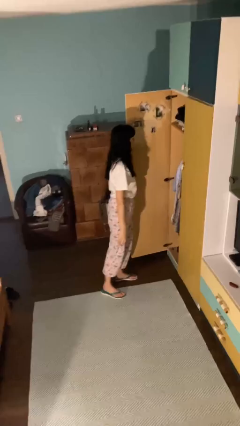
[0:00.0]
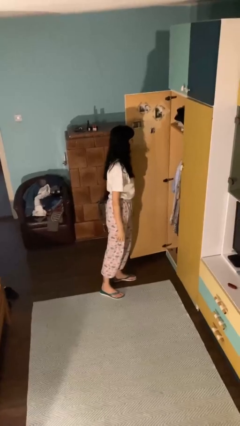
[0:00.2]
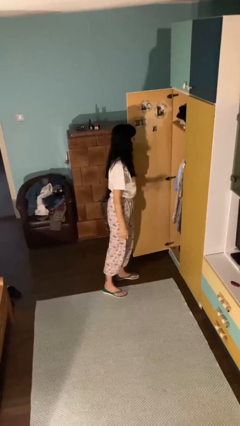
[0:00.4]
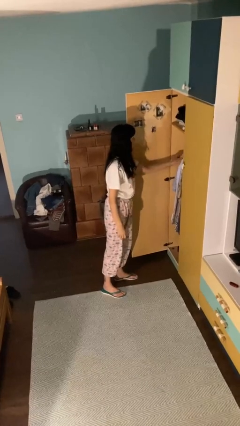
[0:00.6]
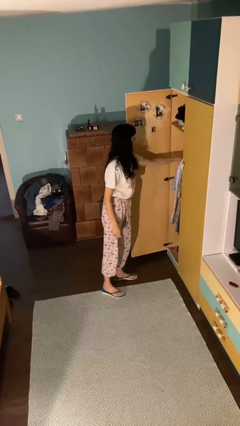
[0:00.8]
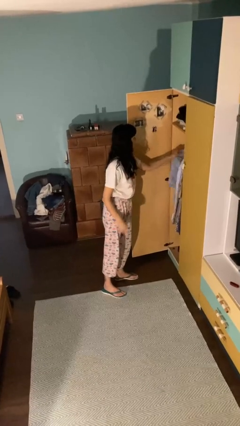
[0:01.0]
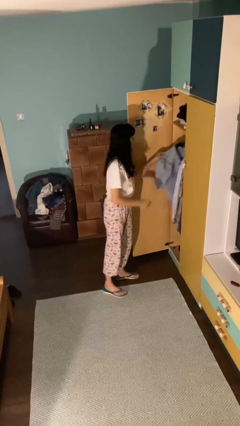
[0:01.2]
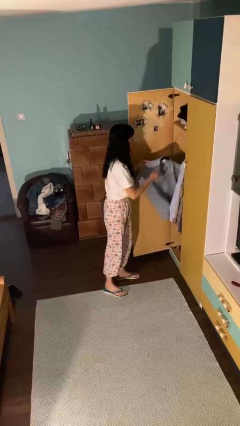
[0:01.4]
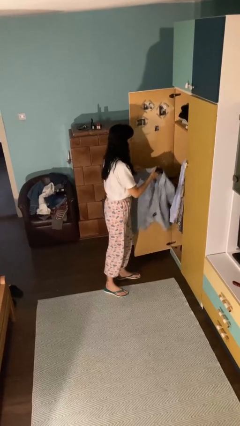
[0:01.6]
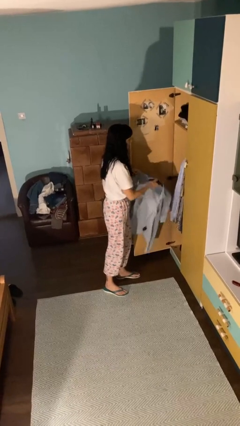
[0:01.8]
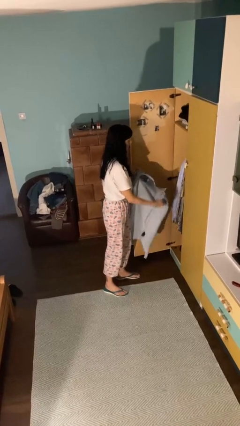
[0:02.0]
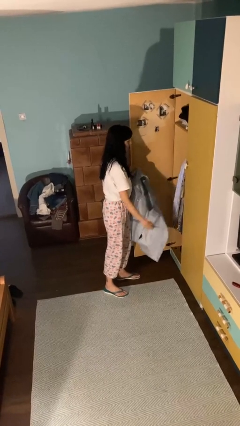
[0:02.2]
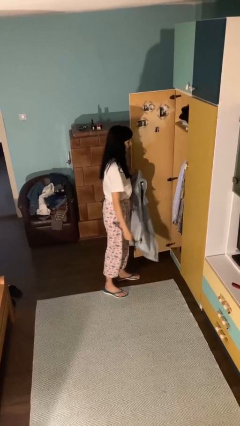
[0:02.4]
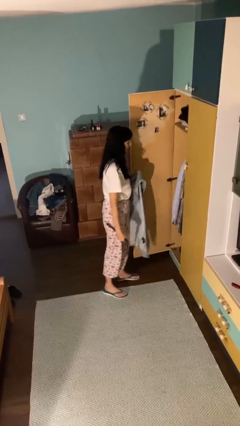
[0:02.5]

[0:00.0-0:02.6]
person takes clothes from closet

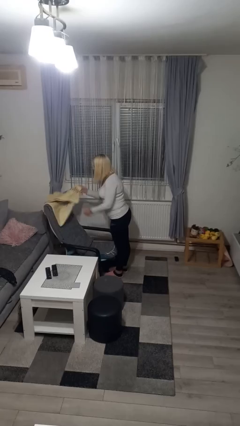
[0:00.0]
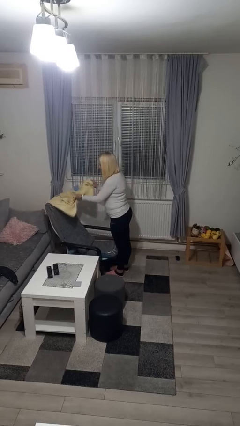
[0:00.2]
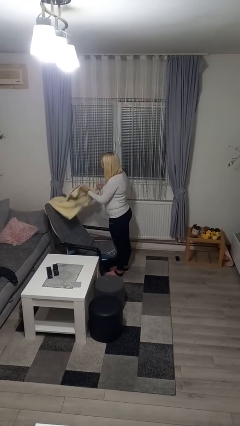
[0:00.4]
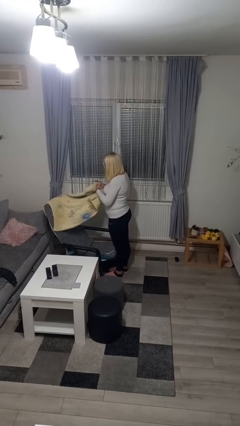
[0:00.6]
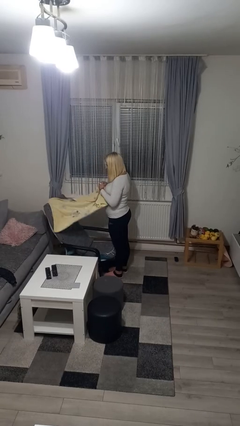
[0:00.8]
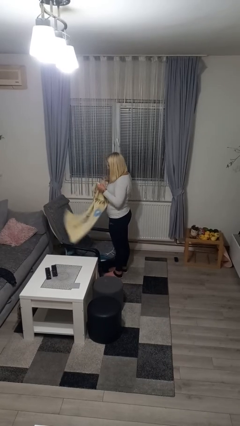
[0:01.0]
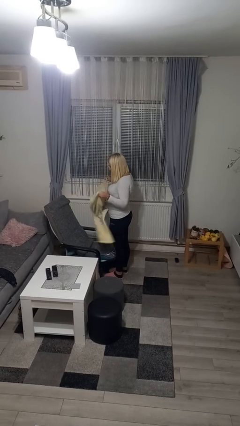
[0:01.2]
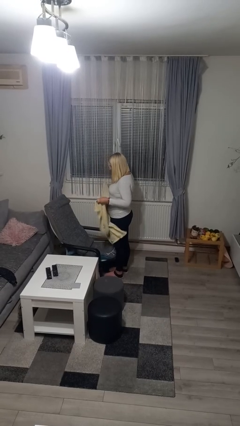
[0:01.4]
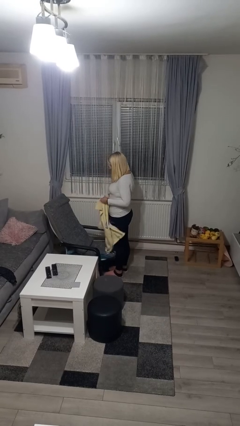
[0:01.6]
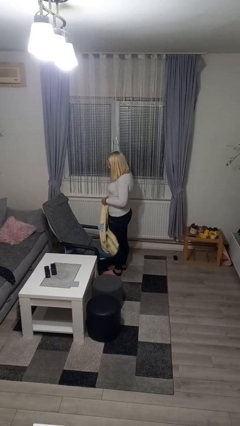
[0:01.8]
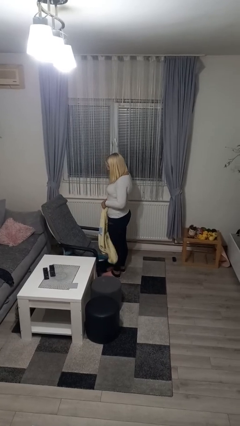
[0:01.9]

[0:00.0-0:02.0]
person unfolds blanket

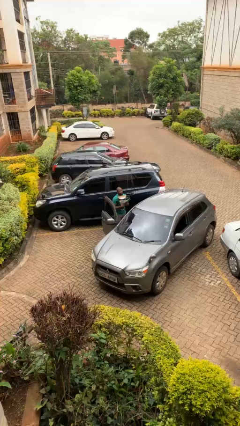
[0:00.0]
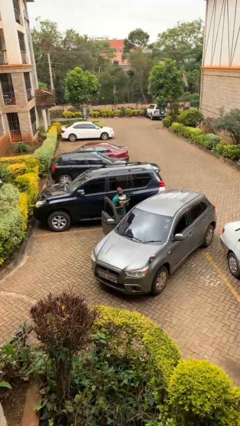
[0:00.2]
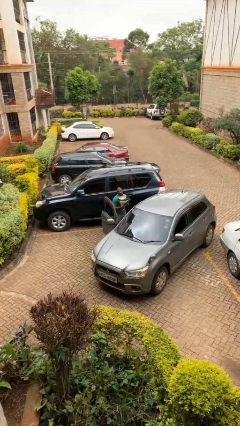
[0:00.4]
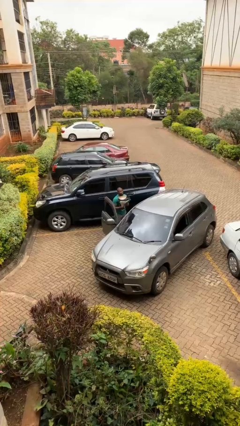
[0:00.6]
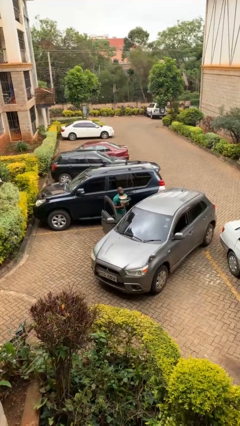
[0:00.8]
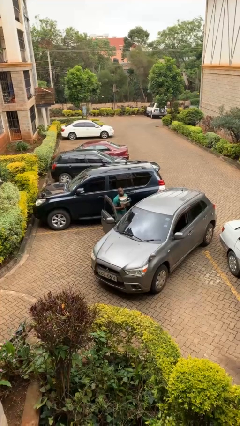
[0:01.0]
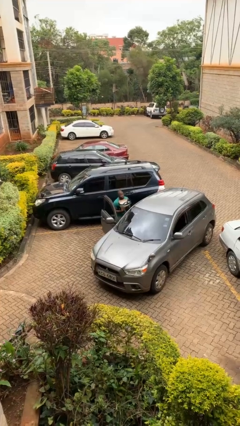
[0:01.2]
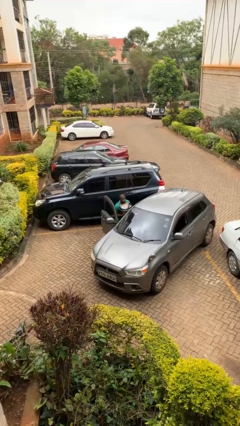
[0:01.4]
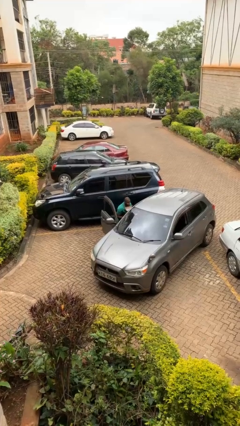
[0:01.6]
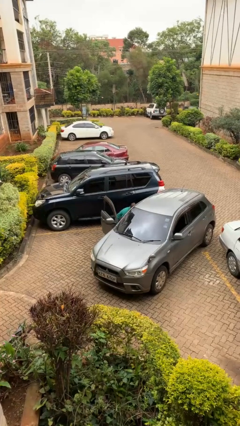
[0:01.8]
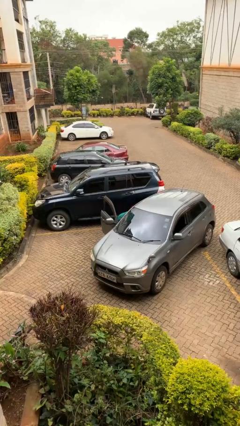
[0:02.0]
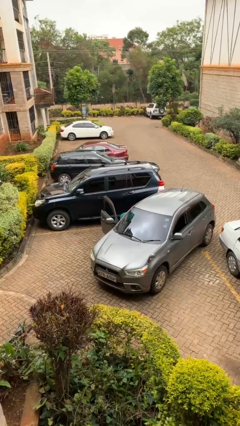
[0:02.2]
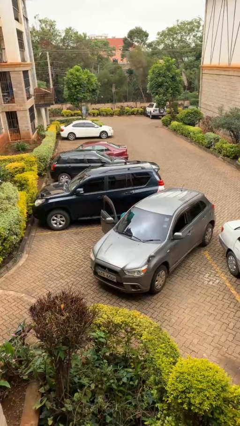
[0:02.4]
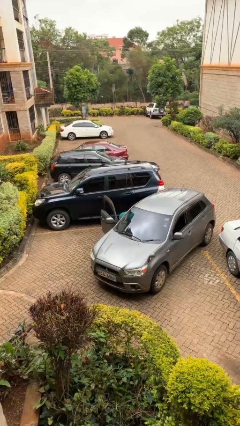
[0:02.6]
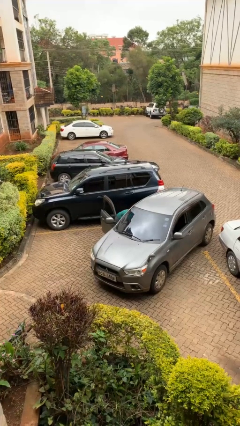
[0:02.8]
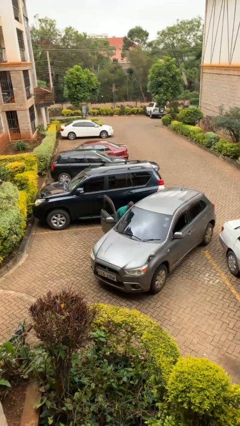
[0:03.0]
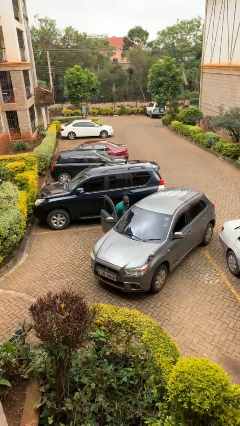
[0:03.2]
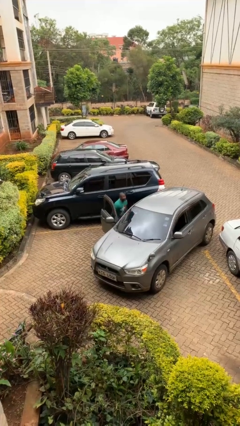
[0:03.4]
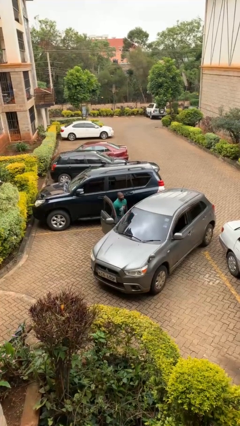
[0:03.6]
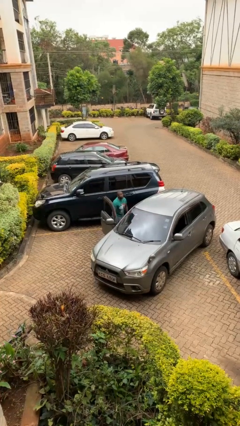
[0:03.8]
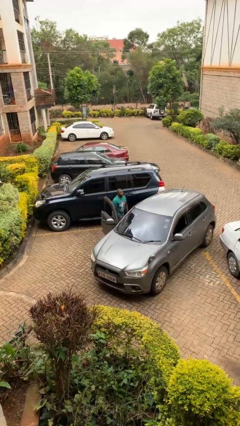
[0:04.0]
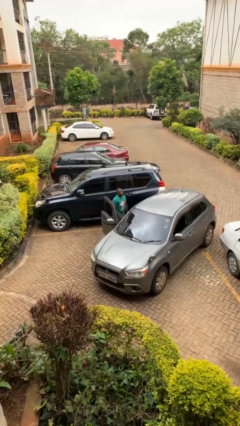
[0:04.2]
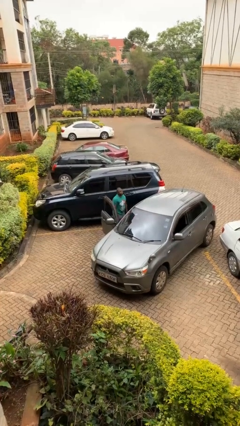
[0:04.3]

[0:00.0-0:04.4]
person loads car

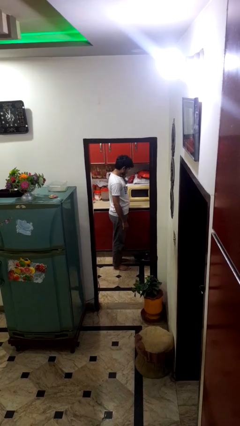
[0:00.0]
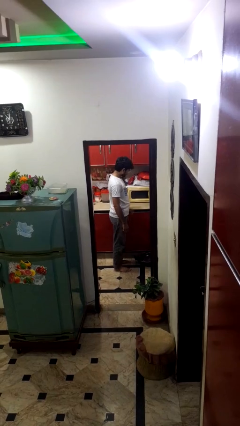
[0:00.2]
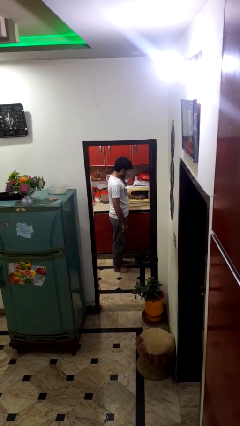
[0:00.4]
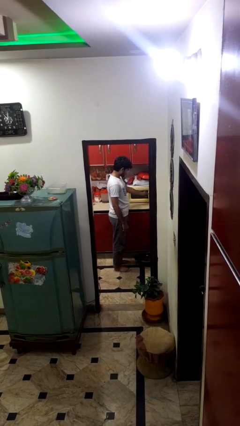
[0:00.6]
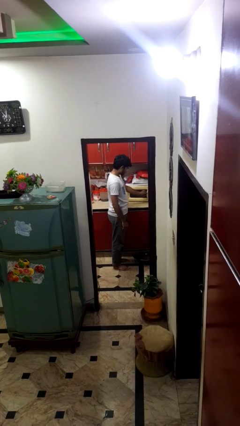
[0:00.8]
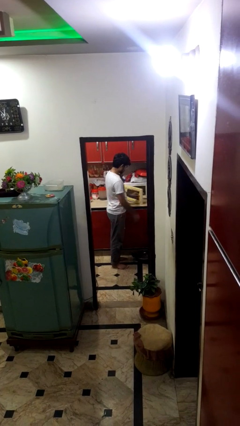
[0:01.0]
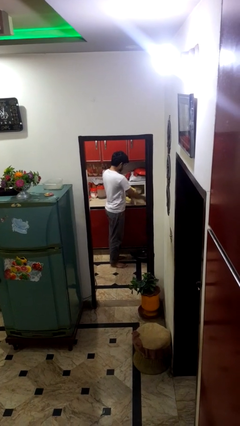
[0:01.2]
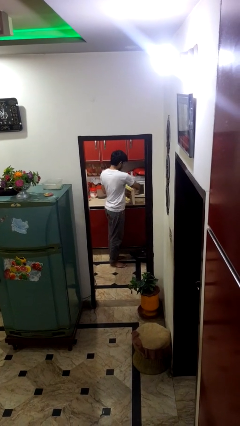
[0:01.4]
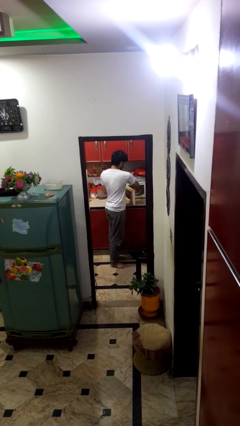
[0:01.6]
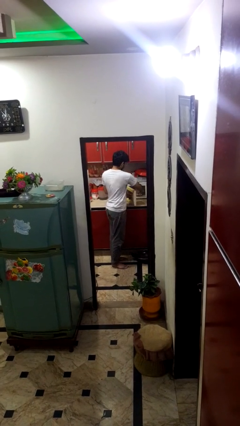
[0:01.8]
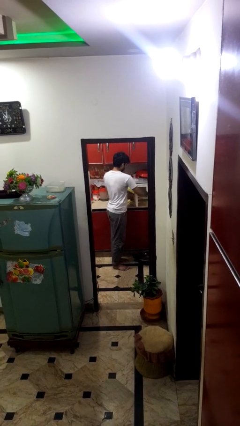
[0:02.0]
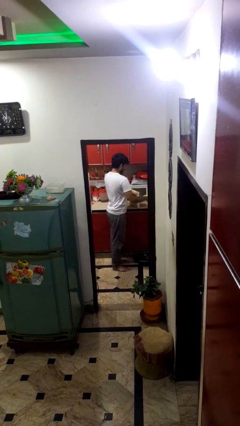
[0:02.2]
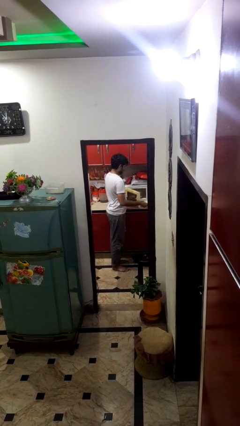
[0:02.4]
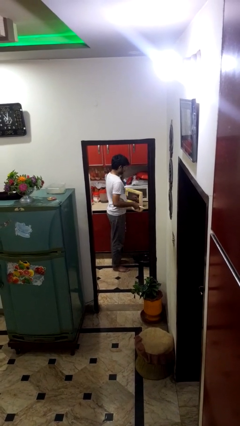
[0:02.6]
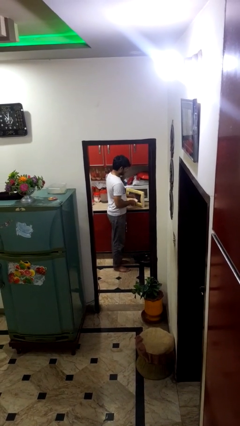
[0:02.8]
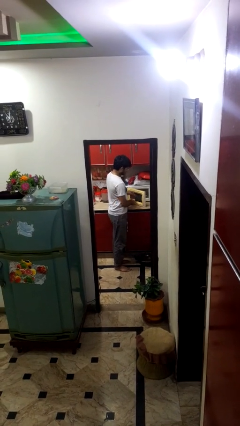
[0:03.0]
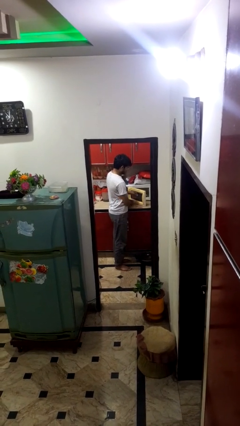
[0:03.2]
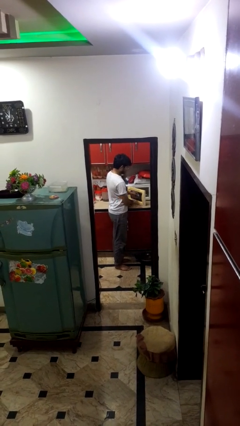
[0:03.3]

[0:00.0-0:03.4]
person takes object from microwave

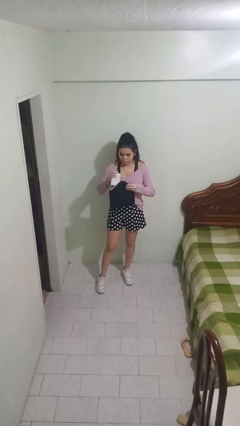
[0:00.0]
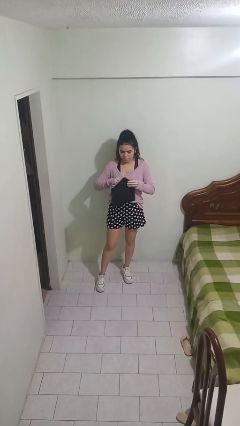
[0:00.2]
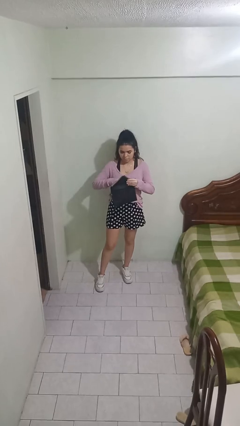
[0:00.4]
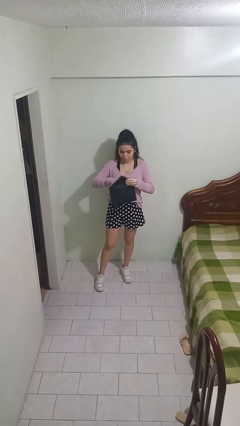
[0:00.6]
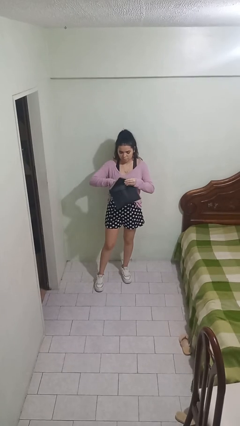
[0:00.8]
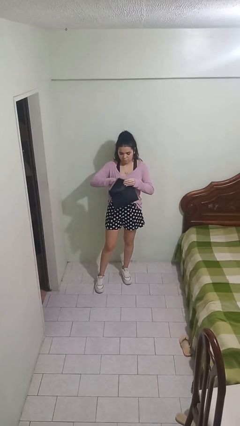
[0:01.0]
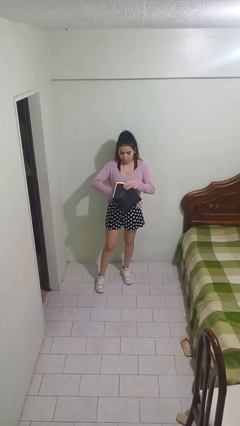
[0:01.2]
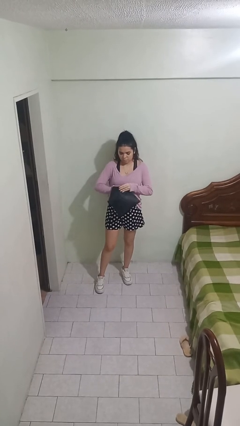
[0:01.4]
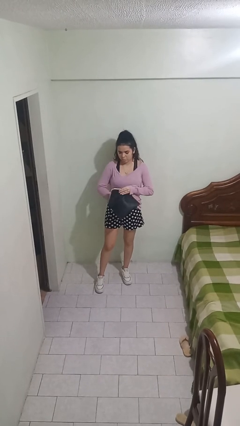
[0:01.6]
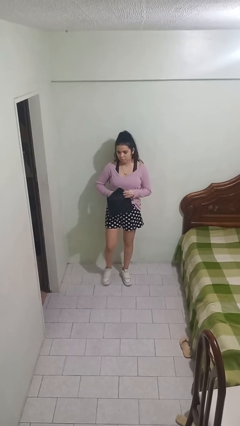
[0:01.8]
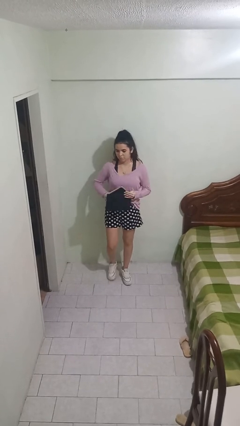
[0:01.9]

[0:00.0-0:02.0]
person puts object into purse

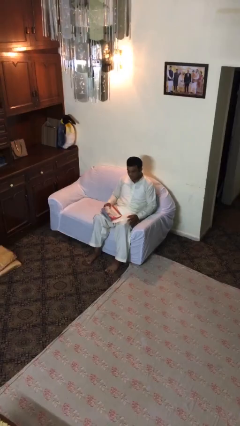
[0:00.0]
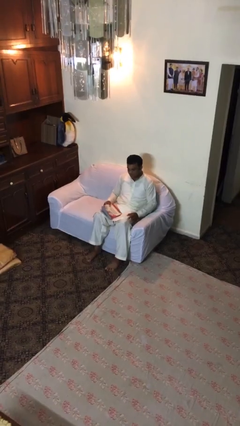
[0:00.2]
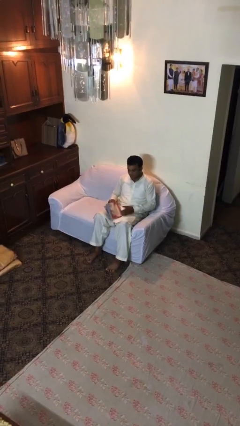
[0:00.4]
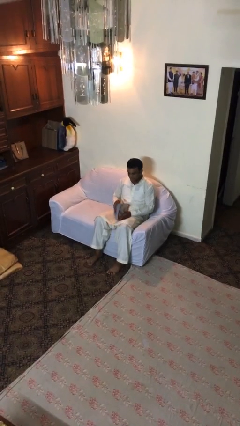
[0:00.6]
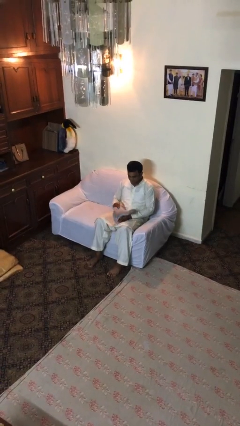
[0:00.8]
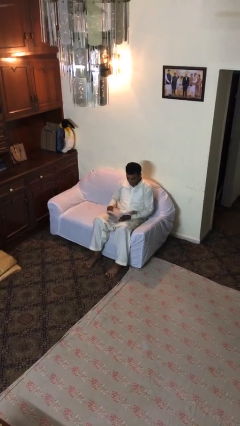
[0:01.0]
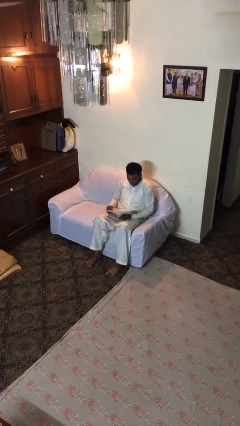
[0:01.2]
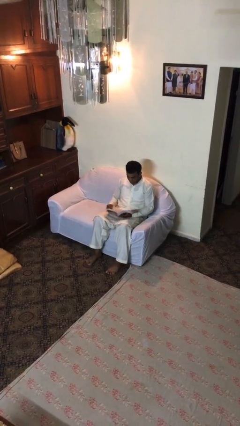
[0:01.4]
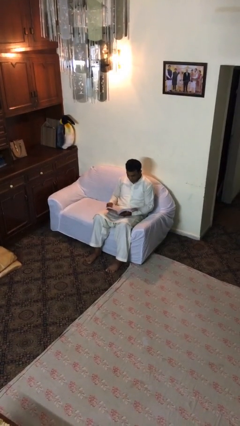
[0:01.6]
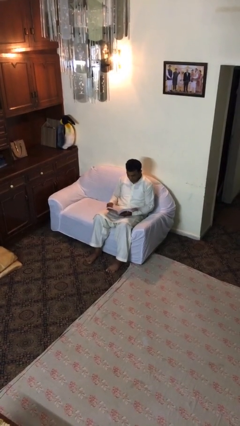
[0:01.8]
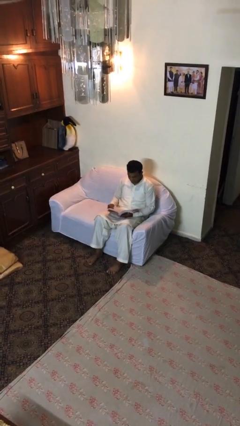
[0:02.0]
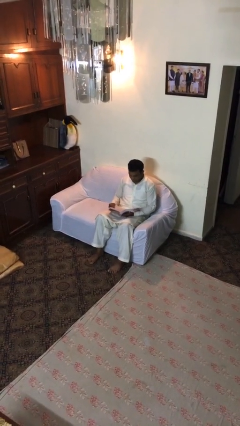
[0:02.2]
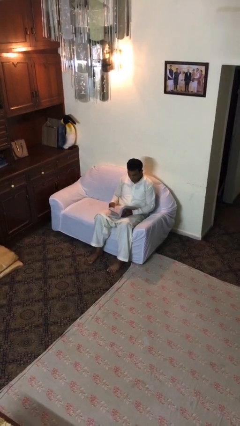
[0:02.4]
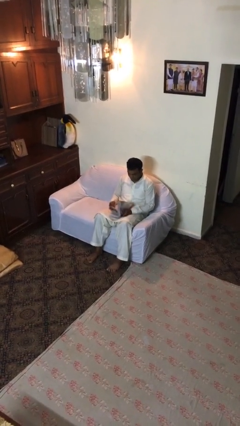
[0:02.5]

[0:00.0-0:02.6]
person reads document
